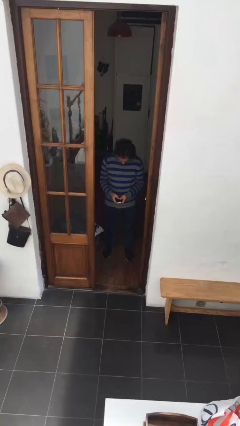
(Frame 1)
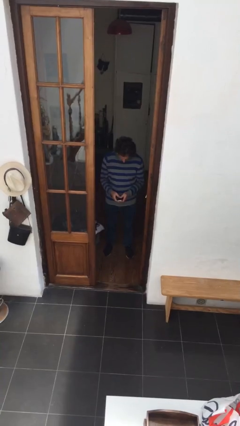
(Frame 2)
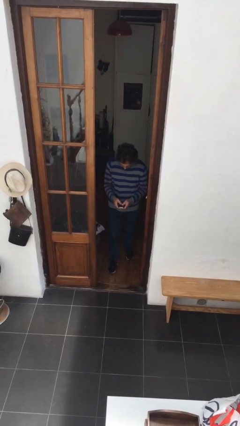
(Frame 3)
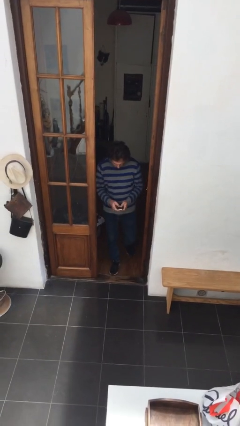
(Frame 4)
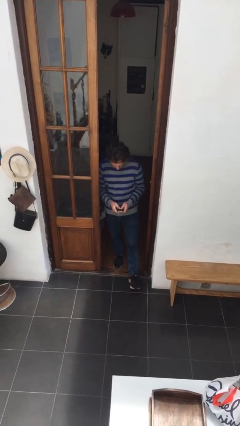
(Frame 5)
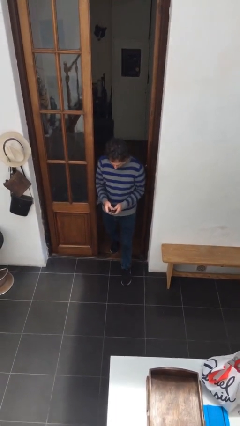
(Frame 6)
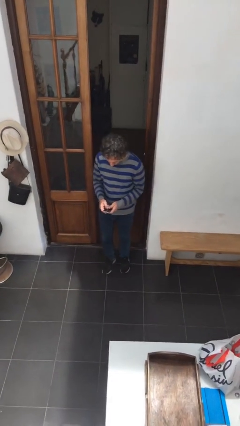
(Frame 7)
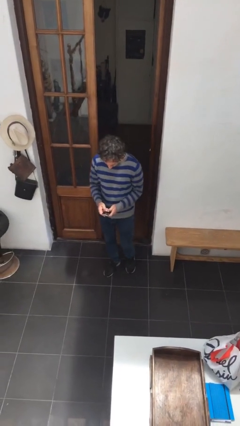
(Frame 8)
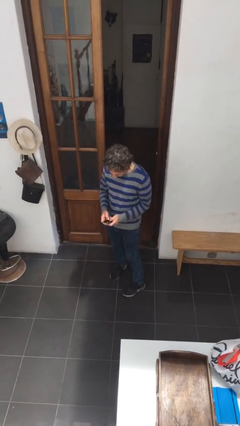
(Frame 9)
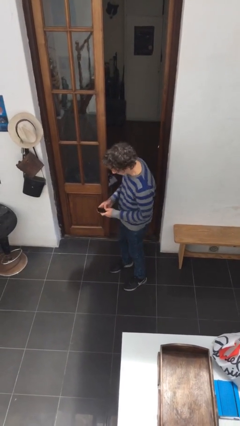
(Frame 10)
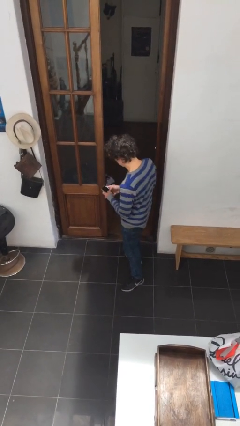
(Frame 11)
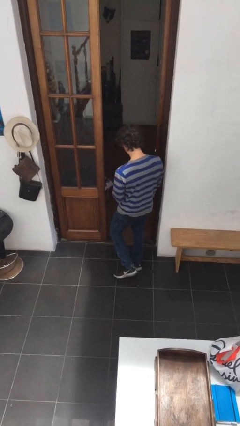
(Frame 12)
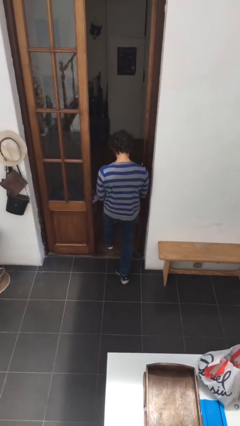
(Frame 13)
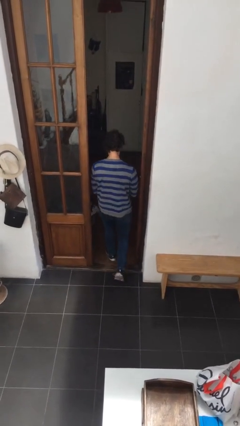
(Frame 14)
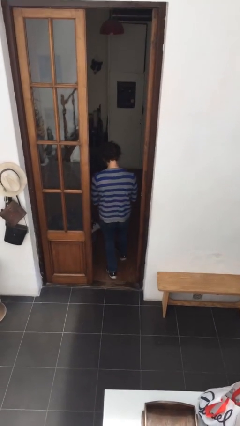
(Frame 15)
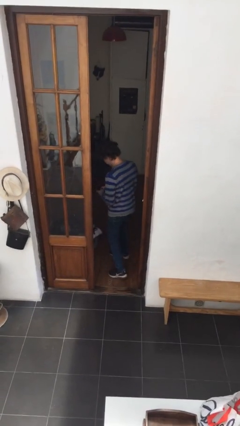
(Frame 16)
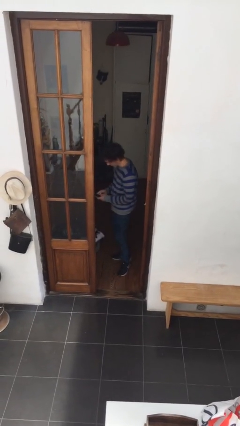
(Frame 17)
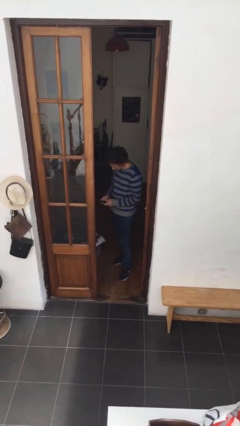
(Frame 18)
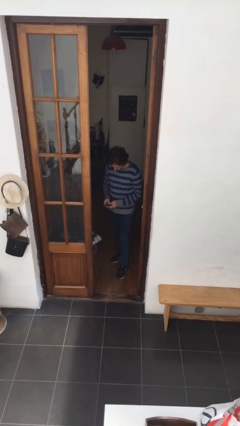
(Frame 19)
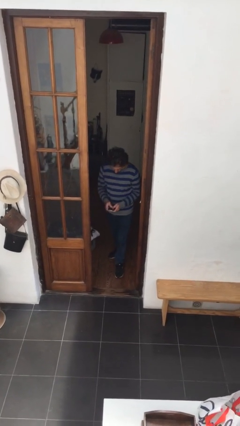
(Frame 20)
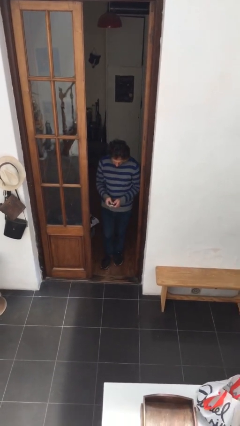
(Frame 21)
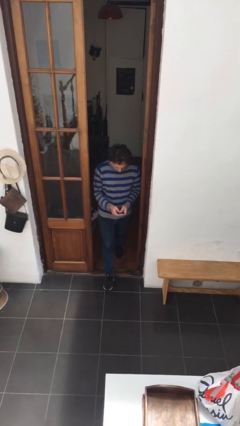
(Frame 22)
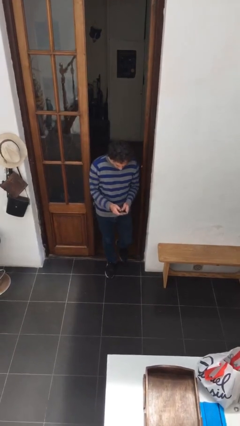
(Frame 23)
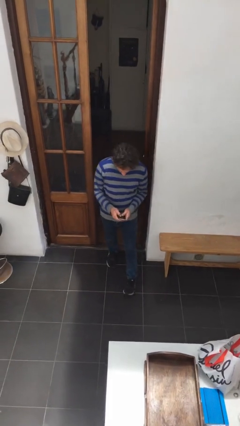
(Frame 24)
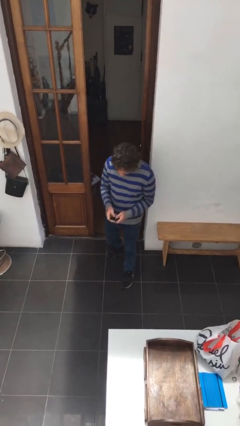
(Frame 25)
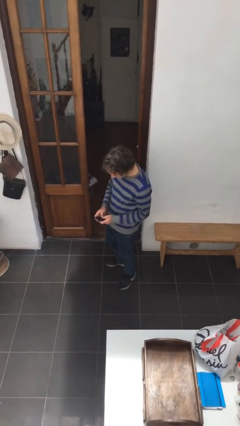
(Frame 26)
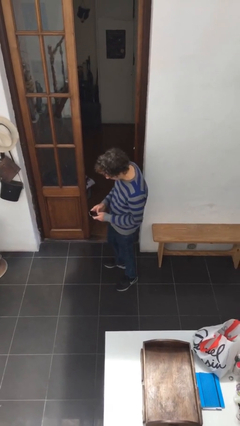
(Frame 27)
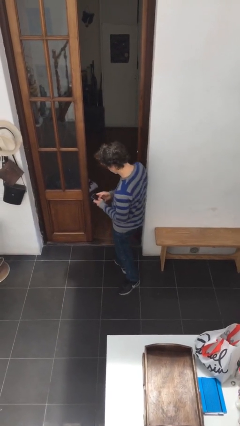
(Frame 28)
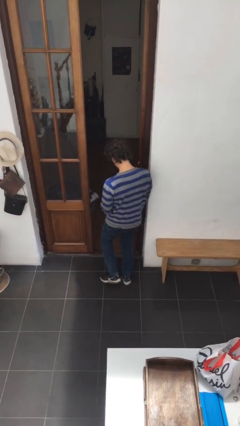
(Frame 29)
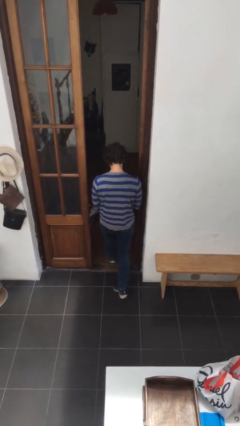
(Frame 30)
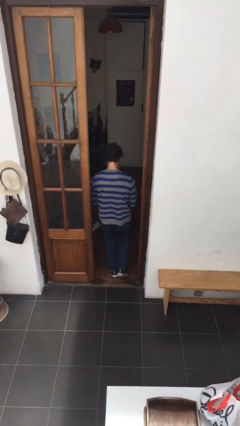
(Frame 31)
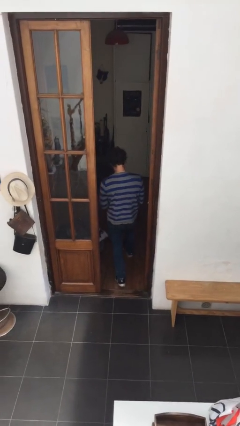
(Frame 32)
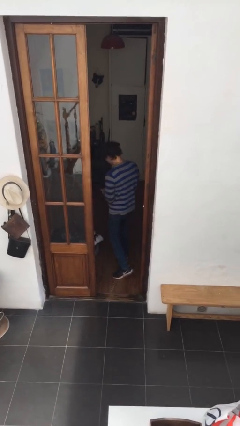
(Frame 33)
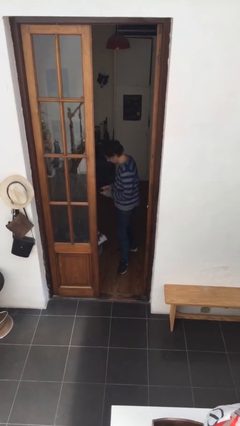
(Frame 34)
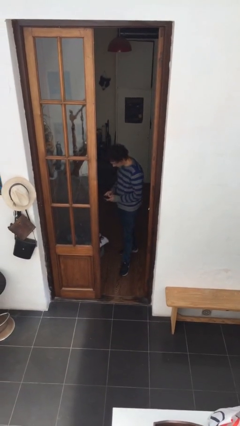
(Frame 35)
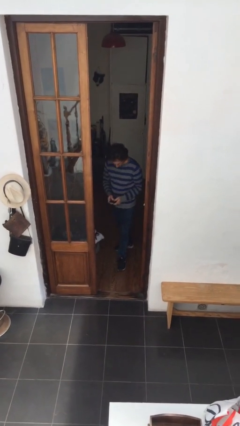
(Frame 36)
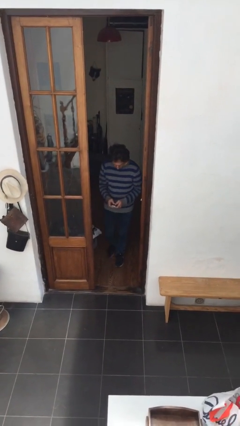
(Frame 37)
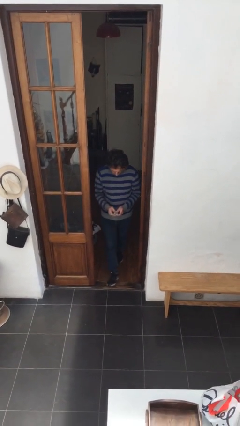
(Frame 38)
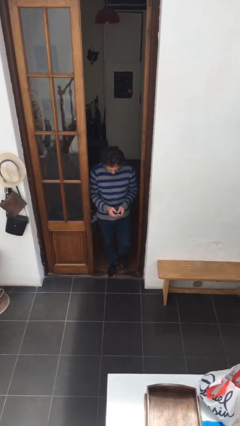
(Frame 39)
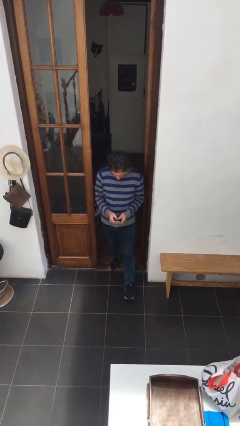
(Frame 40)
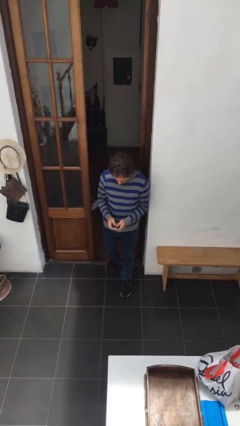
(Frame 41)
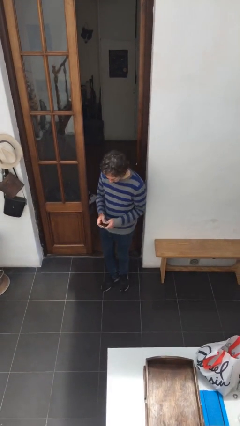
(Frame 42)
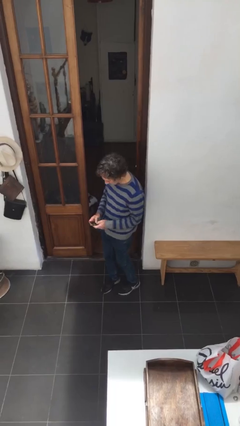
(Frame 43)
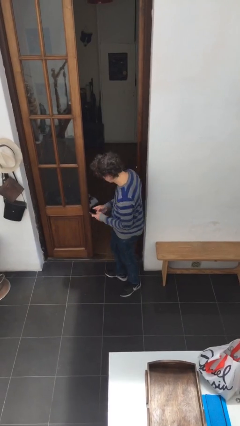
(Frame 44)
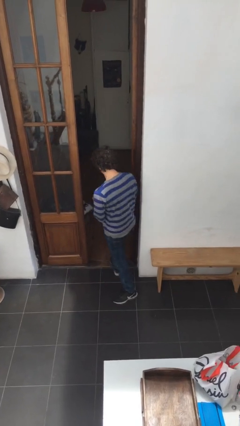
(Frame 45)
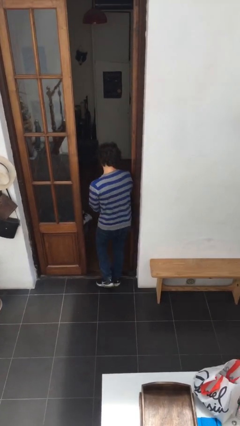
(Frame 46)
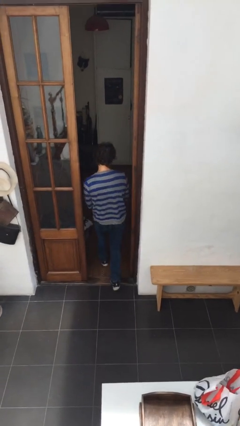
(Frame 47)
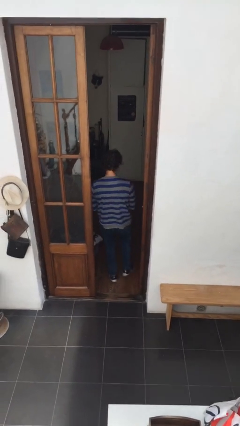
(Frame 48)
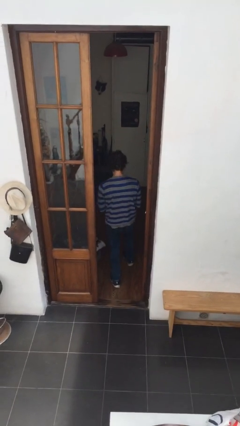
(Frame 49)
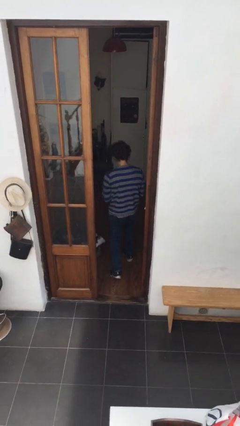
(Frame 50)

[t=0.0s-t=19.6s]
person texts on phone

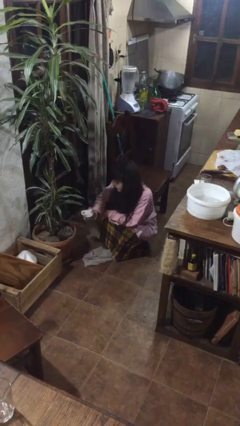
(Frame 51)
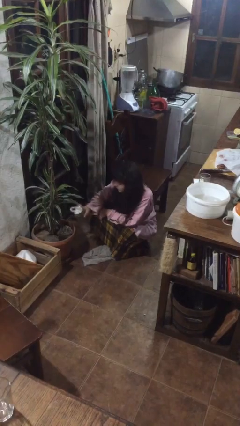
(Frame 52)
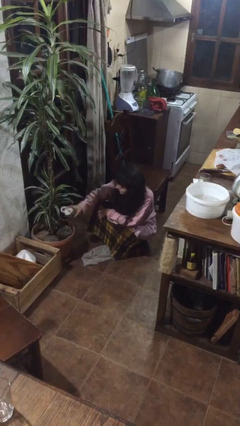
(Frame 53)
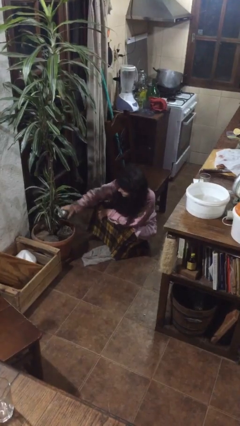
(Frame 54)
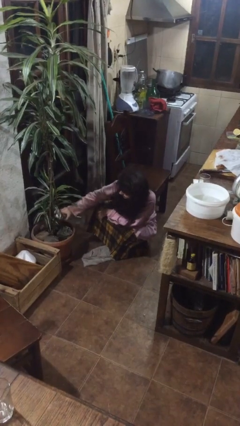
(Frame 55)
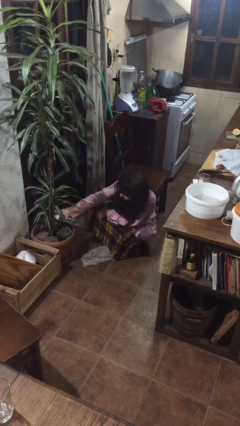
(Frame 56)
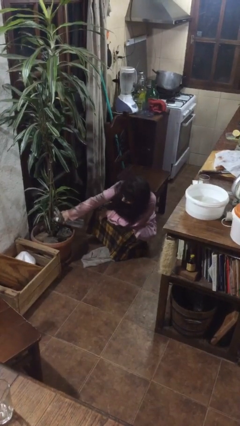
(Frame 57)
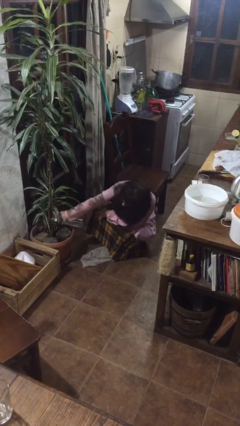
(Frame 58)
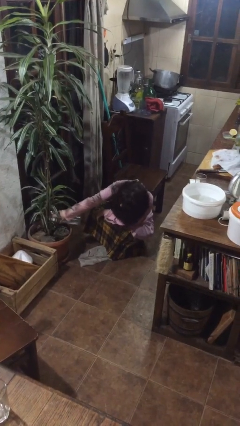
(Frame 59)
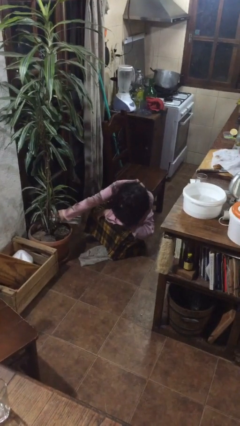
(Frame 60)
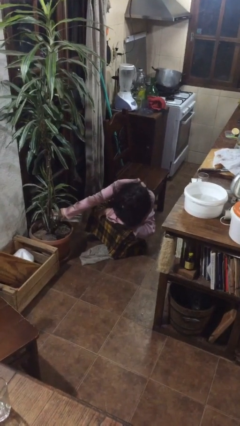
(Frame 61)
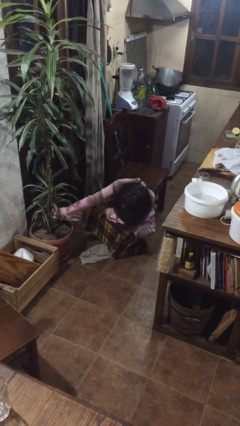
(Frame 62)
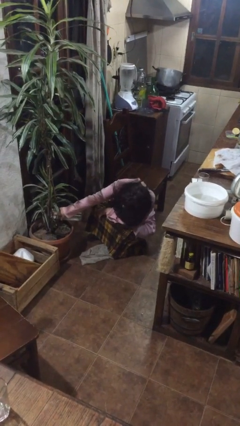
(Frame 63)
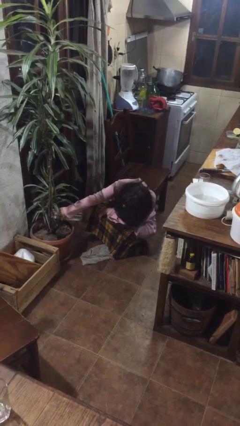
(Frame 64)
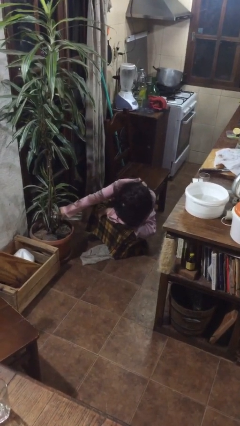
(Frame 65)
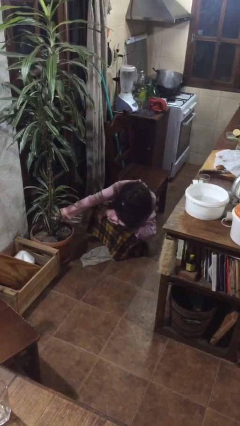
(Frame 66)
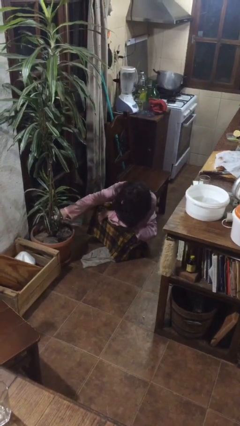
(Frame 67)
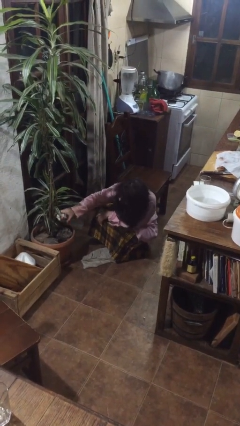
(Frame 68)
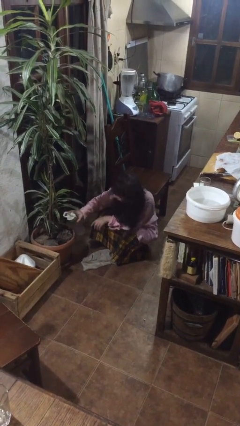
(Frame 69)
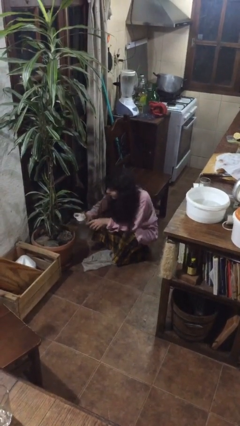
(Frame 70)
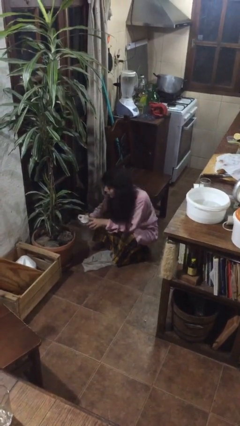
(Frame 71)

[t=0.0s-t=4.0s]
person waters houseplant

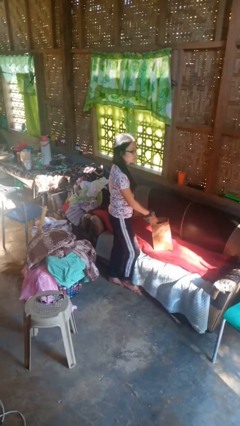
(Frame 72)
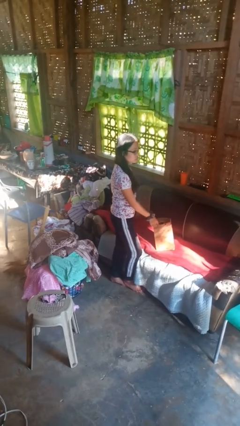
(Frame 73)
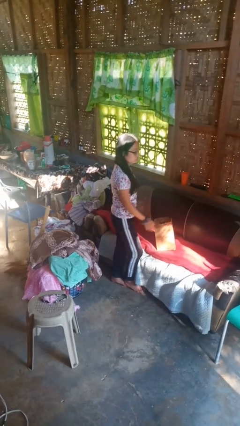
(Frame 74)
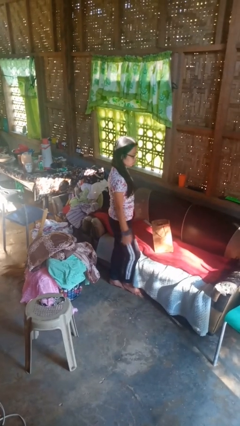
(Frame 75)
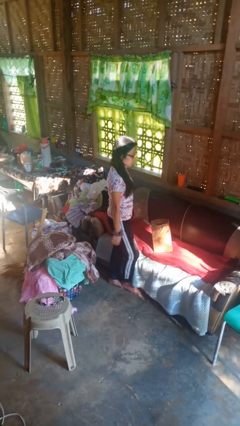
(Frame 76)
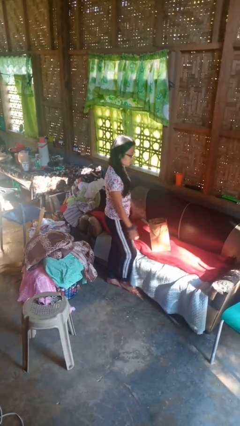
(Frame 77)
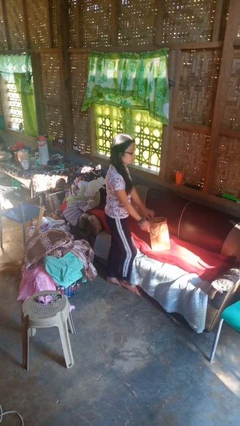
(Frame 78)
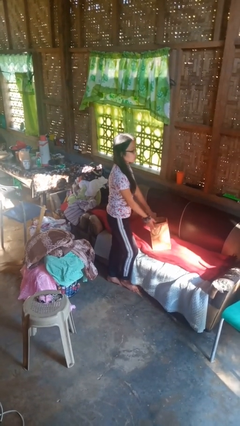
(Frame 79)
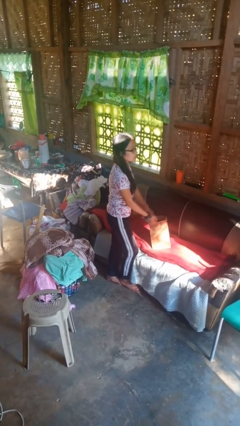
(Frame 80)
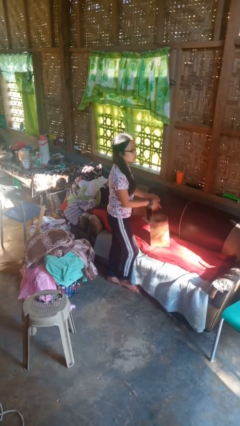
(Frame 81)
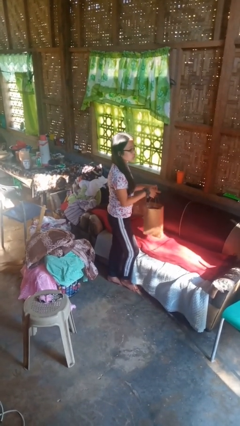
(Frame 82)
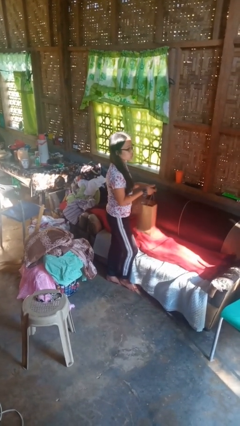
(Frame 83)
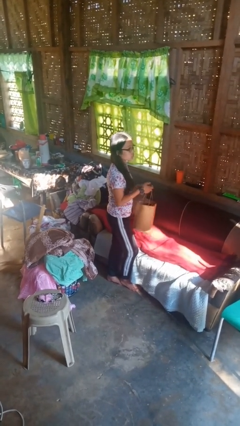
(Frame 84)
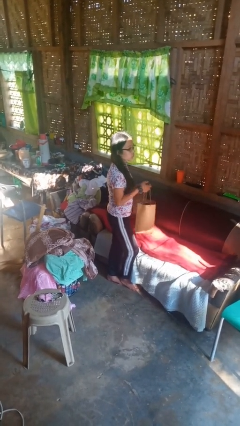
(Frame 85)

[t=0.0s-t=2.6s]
person picks up object from couch

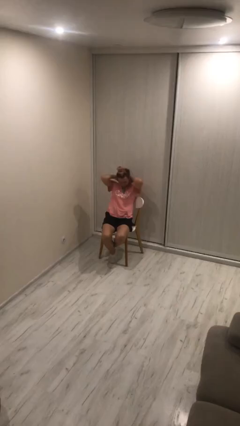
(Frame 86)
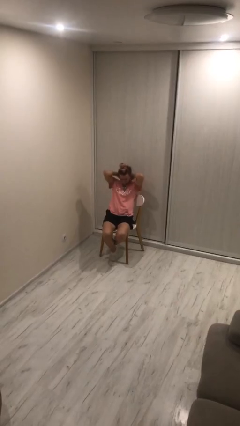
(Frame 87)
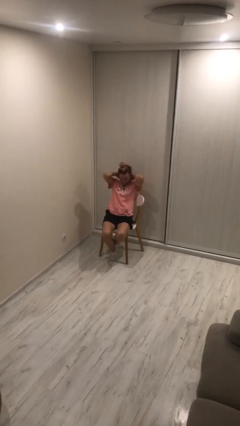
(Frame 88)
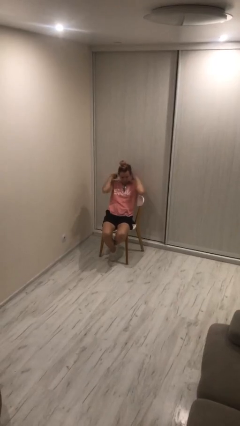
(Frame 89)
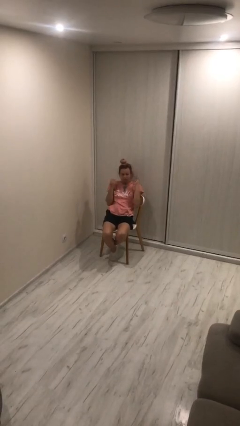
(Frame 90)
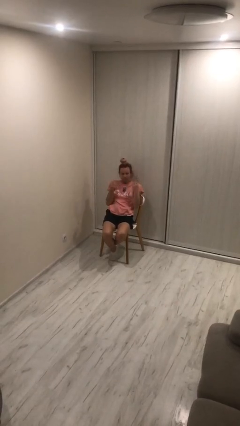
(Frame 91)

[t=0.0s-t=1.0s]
person takes off necklace

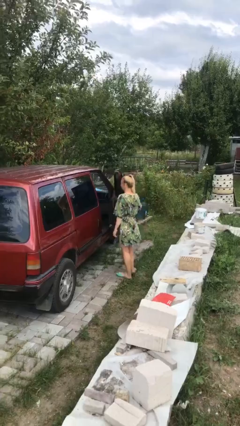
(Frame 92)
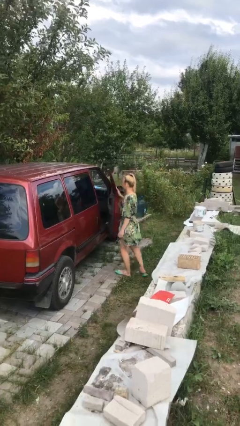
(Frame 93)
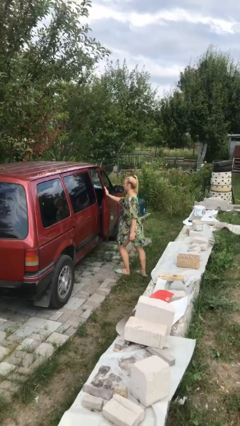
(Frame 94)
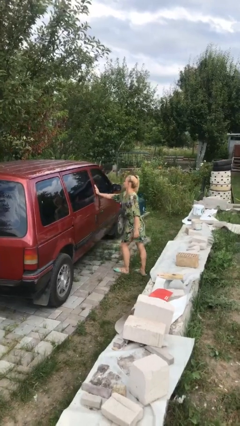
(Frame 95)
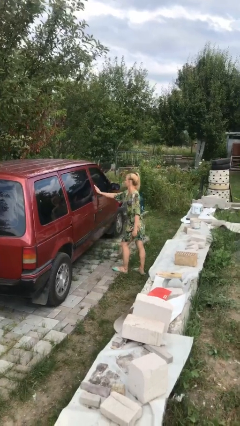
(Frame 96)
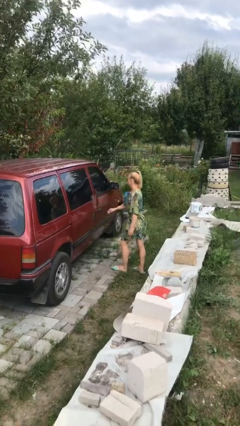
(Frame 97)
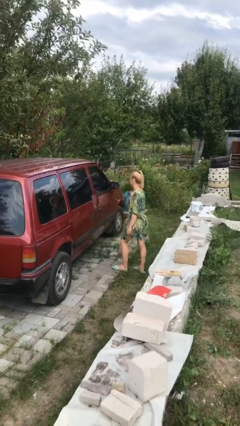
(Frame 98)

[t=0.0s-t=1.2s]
person closes car door
